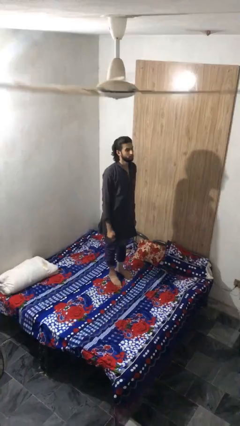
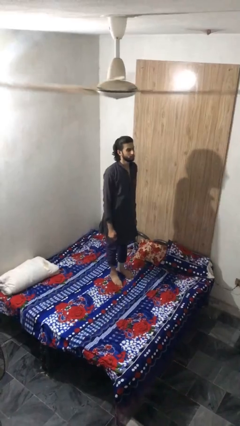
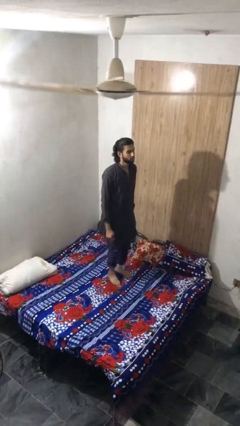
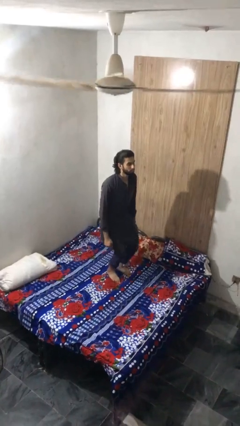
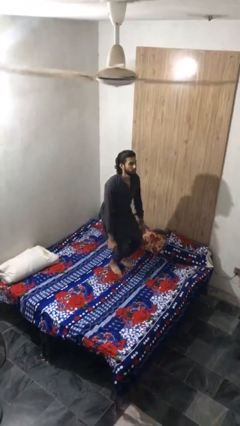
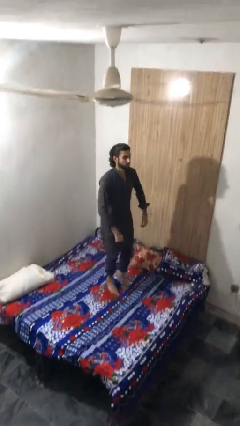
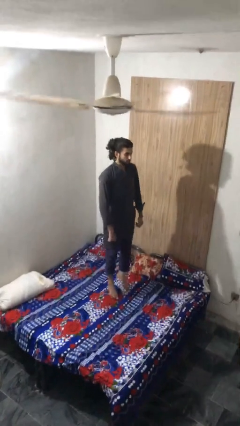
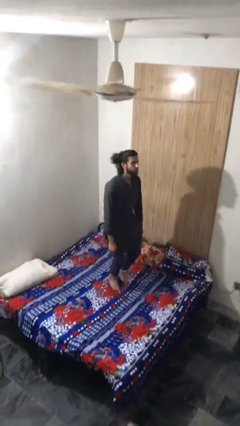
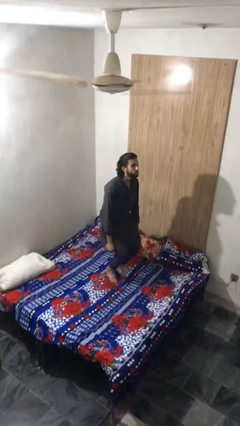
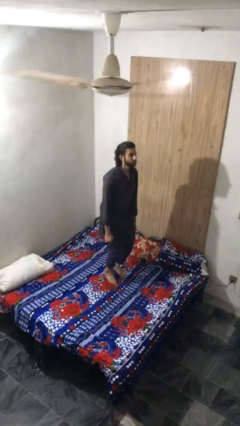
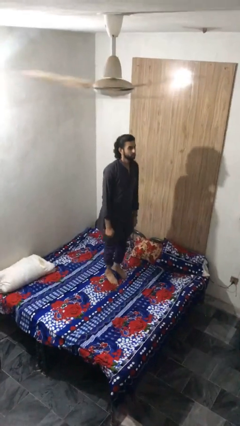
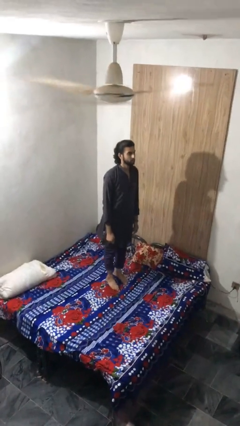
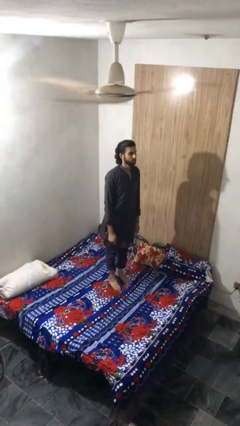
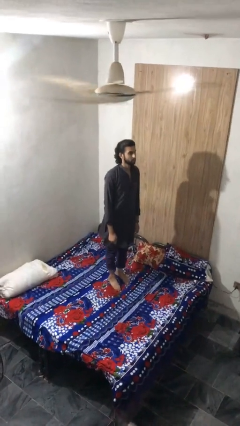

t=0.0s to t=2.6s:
person jumps on bed

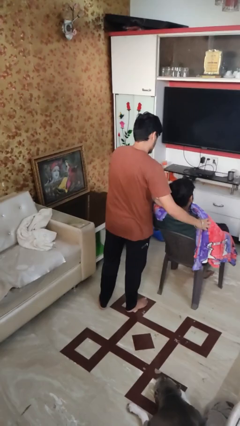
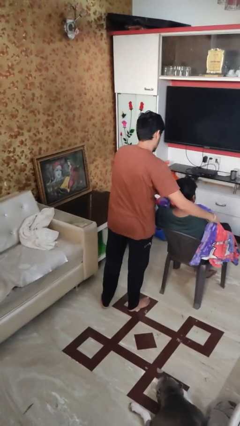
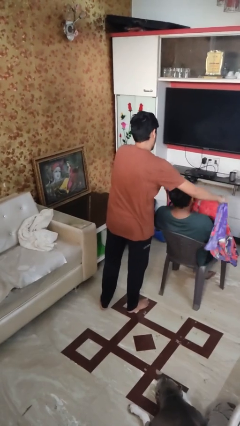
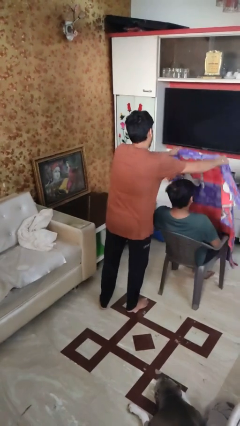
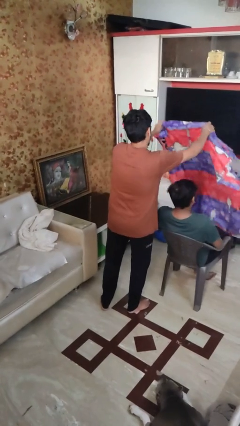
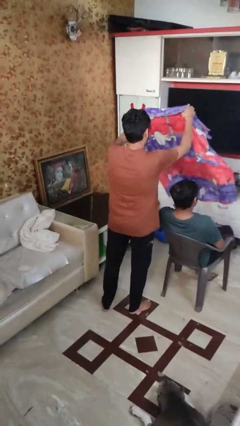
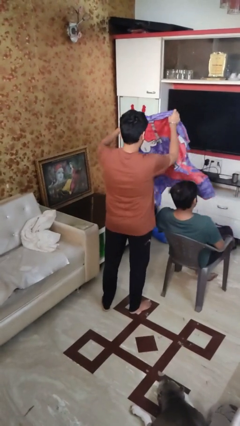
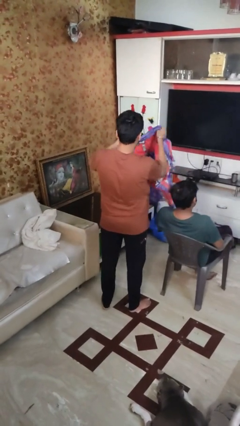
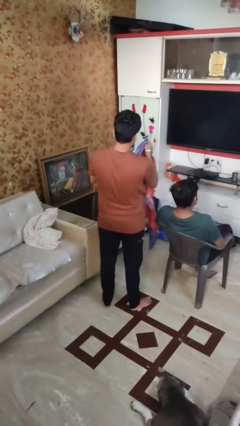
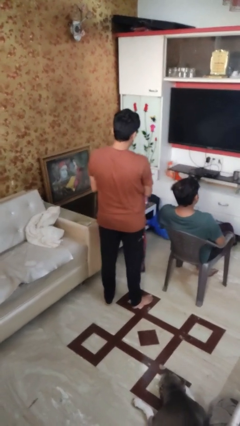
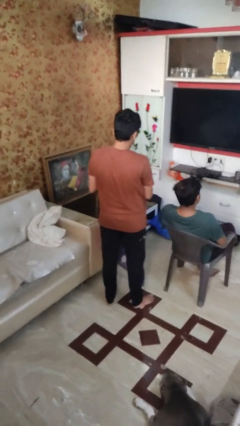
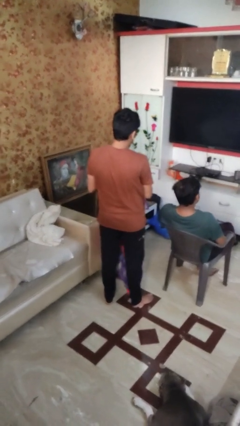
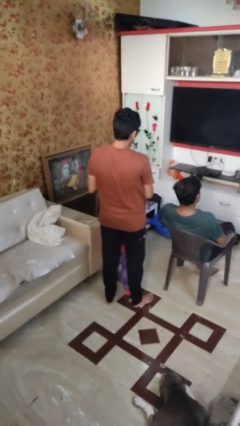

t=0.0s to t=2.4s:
person uncovers friend with blanket

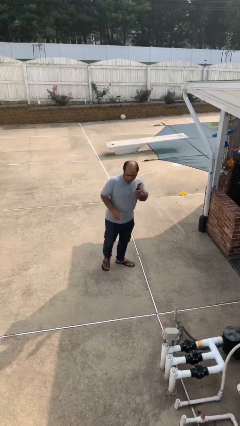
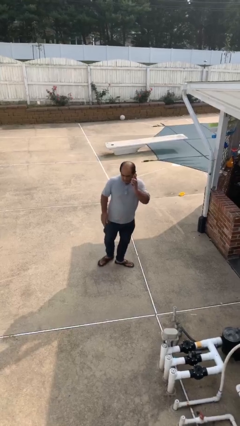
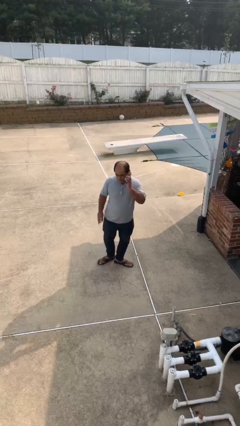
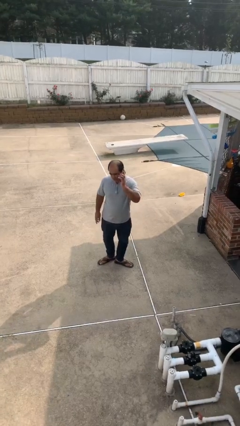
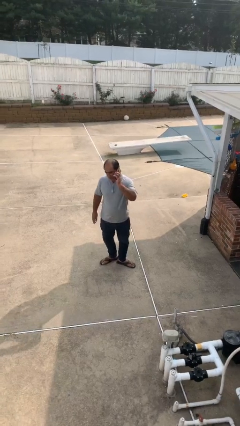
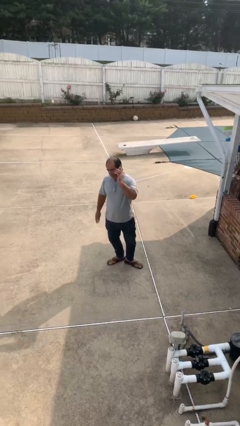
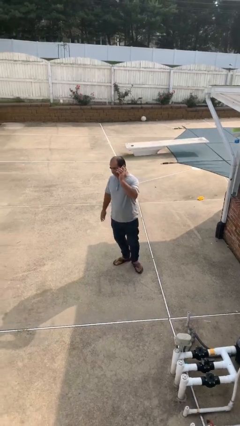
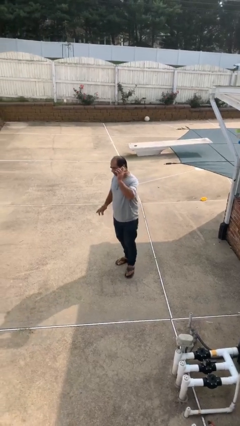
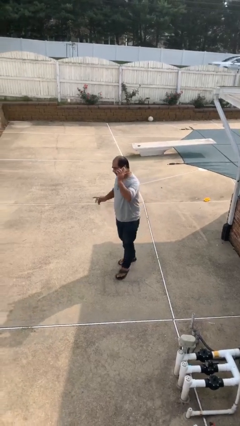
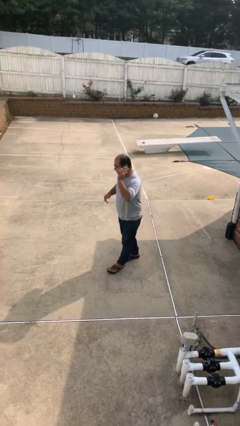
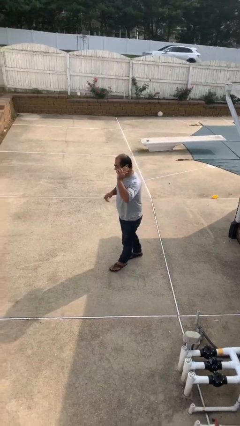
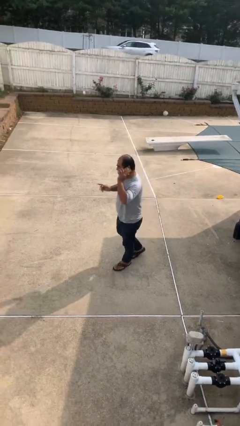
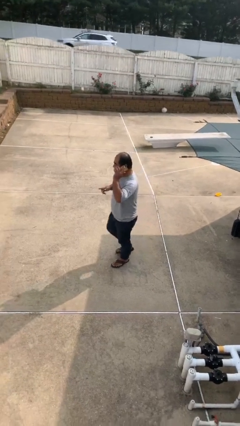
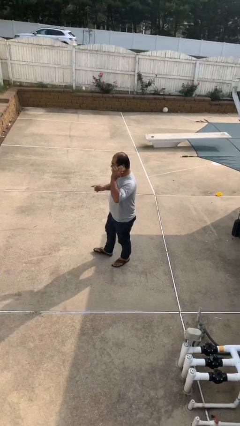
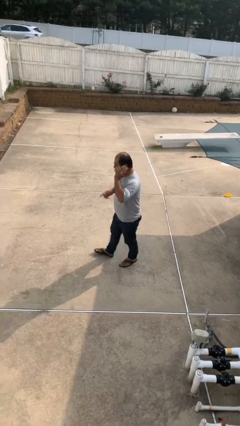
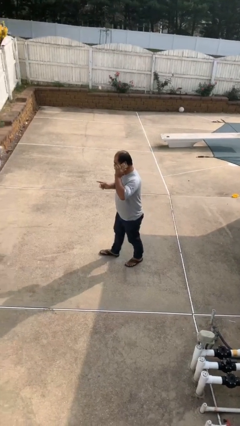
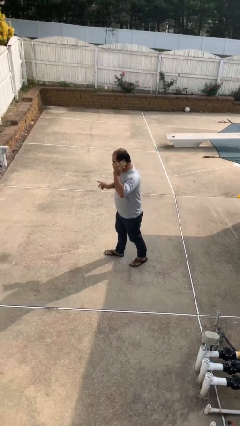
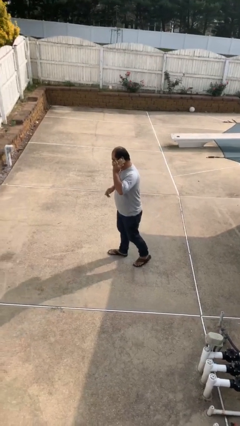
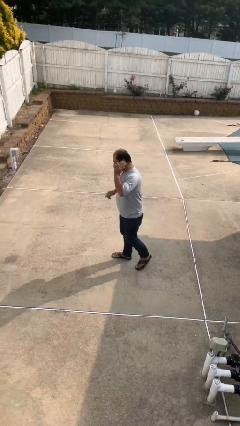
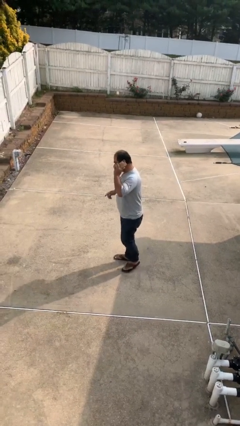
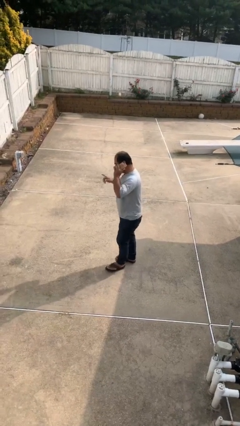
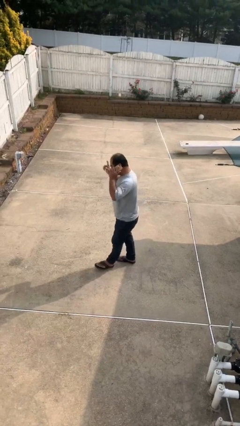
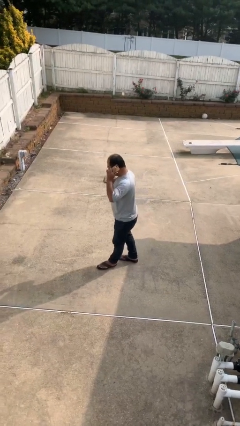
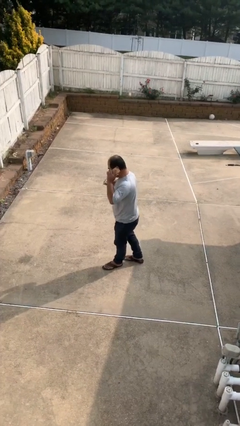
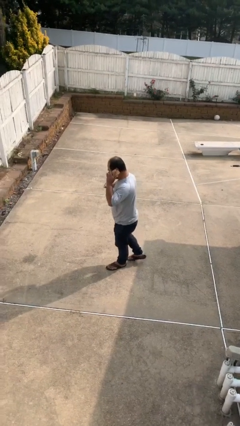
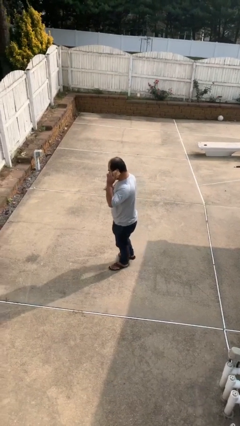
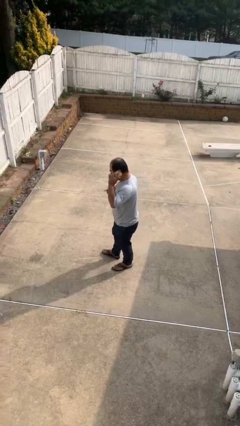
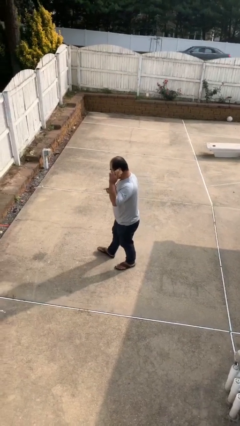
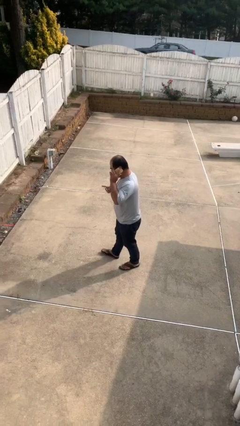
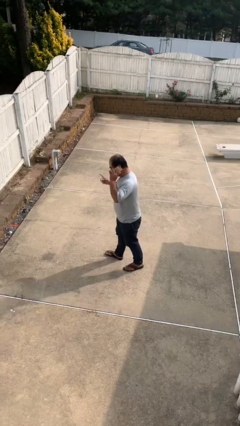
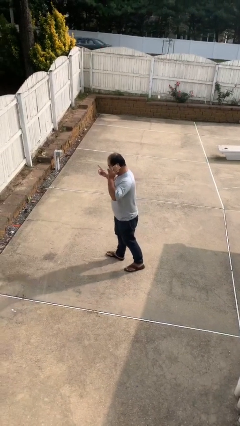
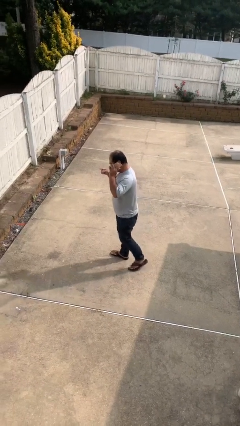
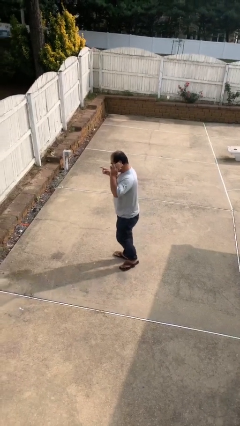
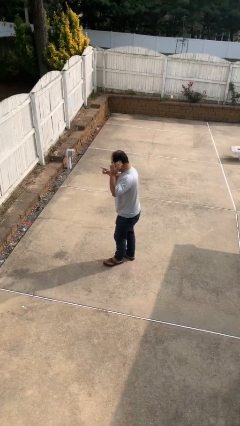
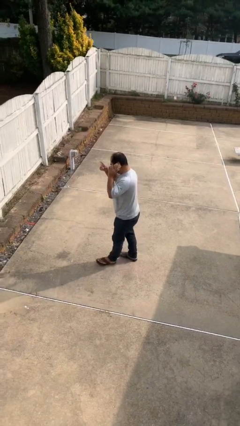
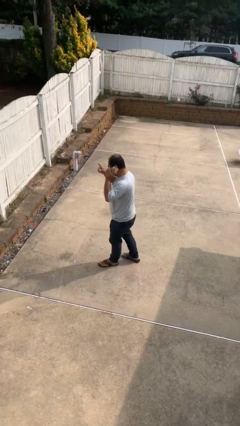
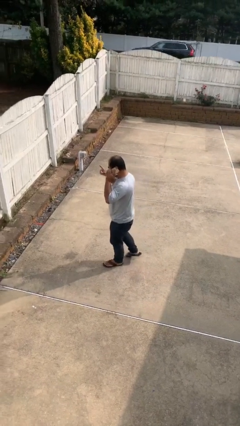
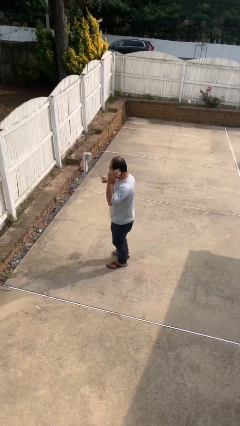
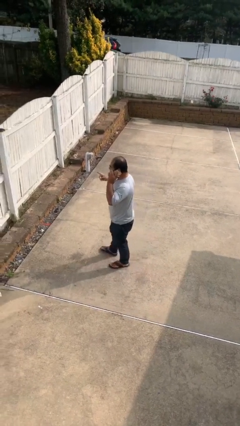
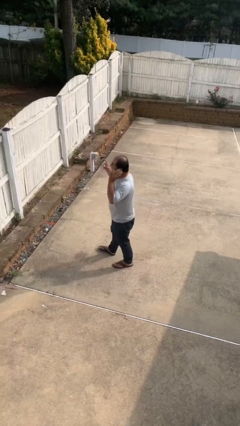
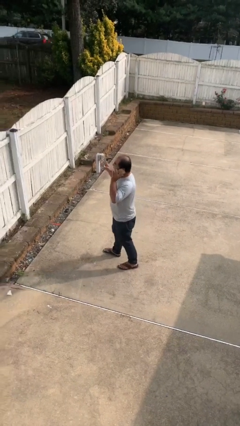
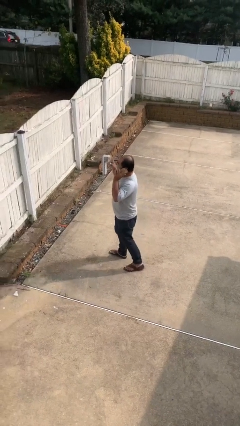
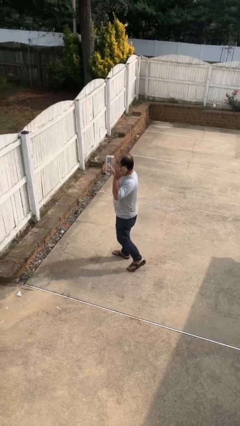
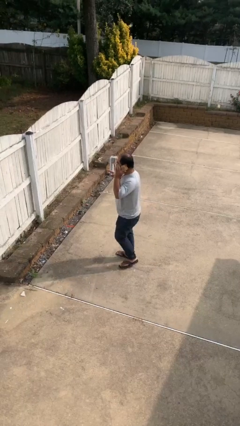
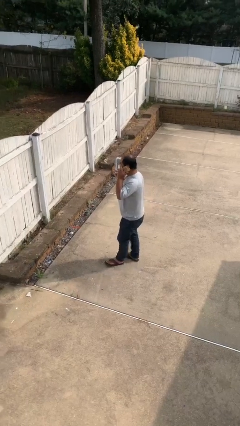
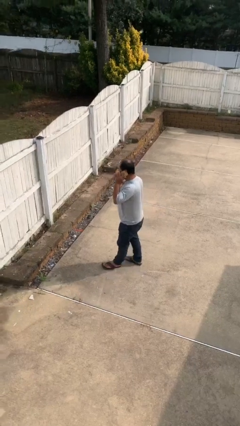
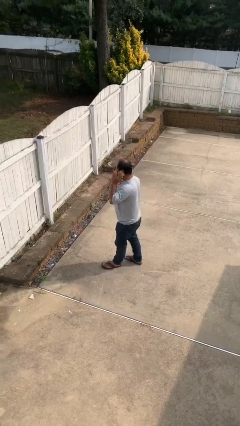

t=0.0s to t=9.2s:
person talks on phone

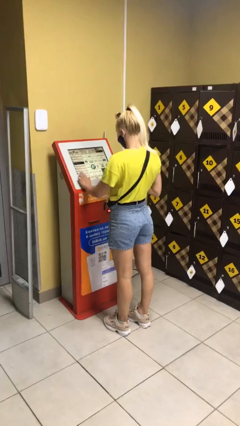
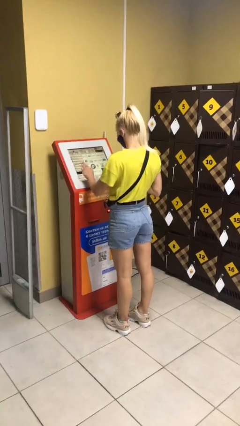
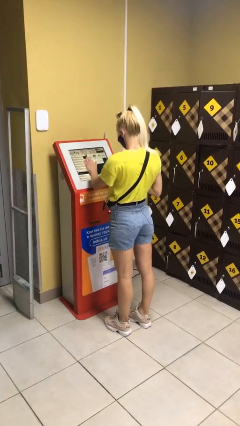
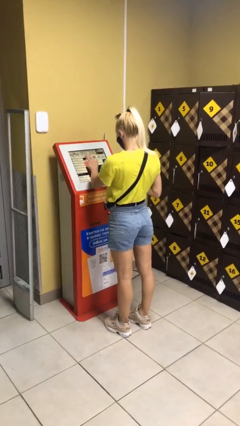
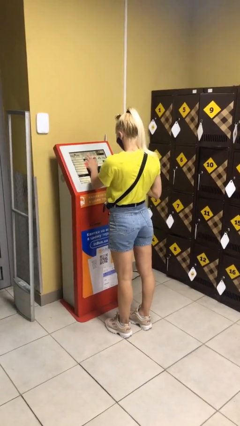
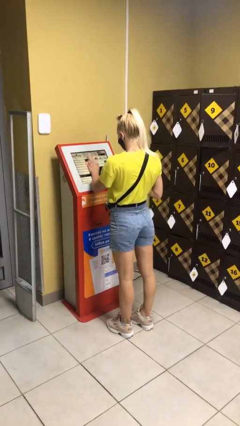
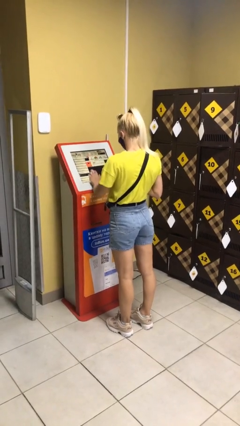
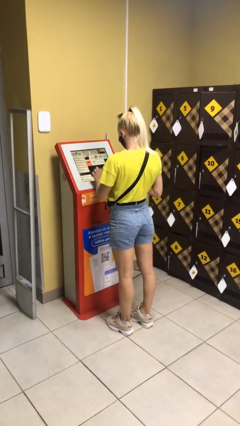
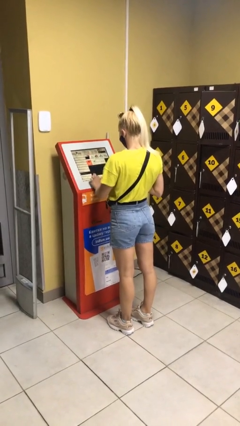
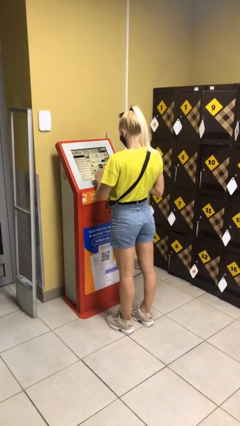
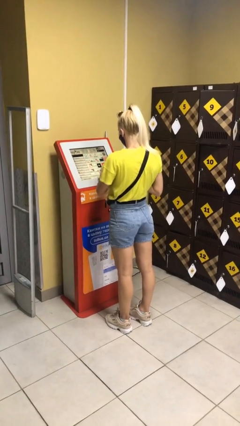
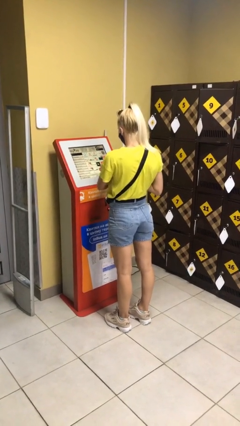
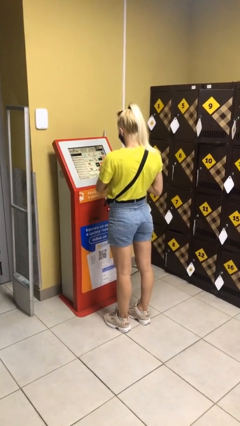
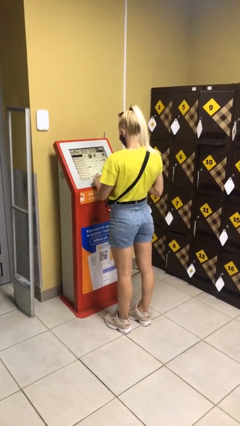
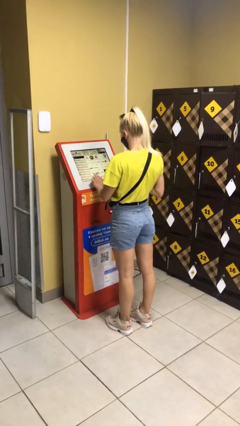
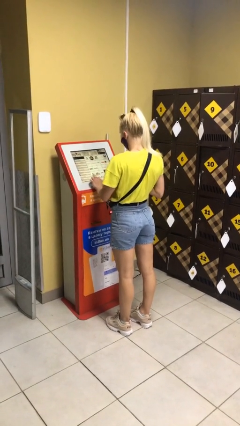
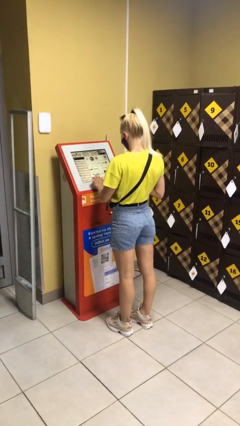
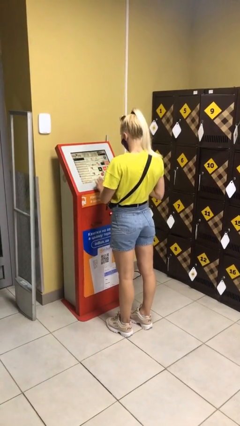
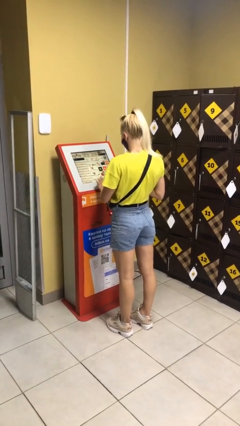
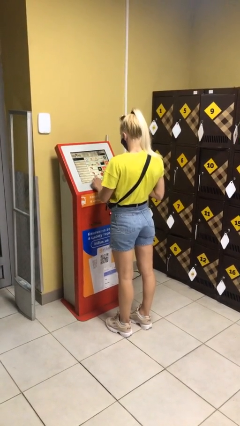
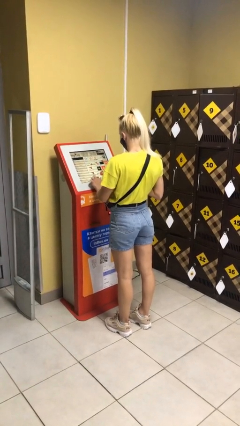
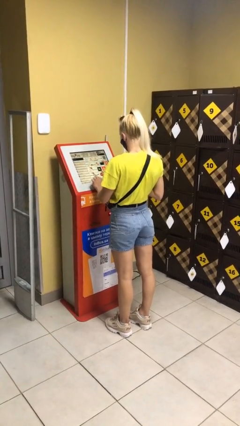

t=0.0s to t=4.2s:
person purchases from machine
